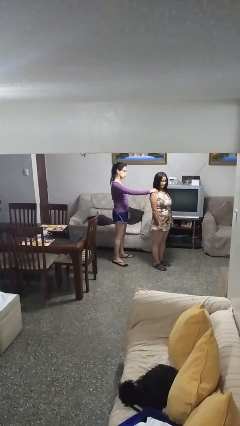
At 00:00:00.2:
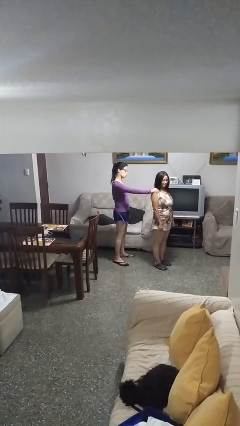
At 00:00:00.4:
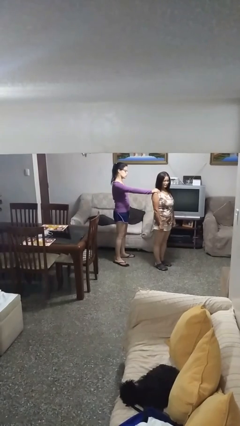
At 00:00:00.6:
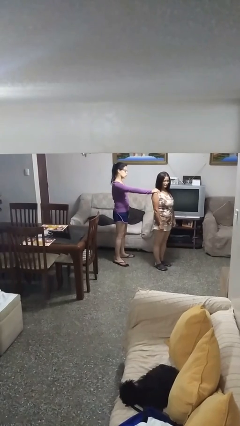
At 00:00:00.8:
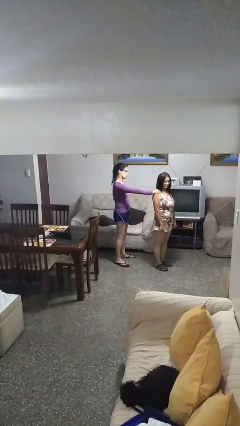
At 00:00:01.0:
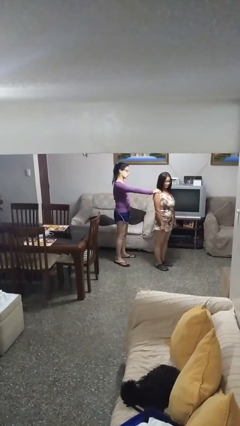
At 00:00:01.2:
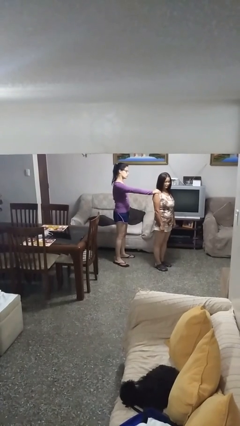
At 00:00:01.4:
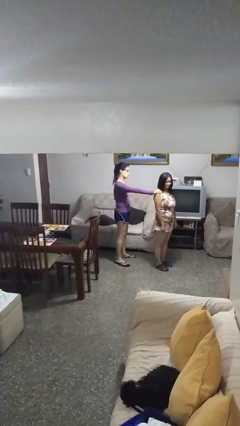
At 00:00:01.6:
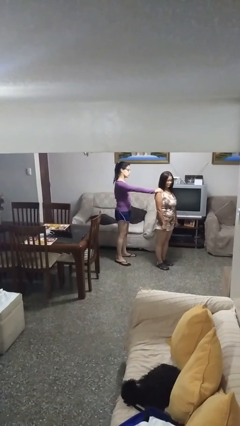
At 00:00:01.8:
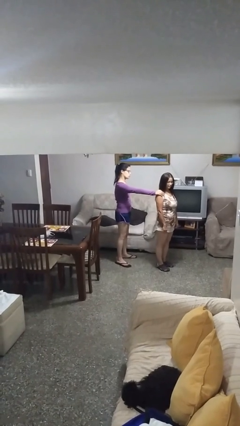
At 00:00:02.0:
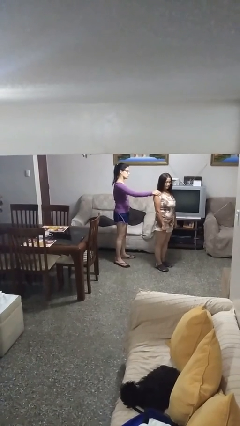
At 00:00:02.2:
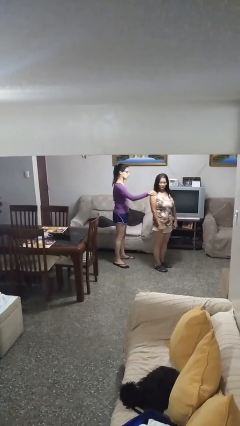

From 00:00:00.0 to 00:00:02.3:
person grabs person by shoulder

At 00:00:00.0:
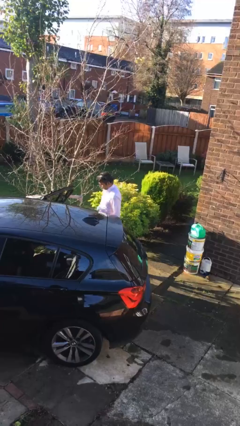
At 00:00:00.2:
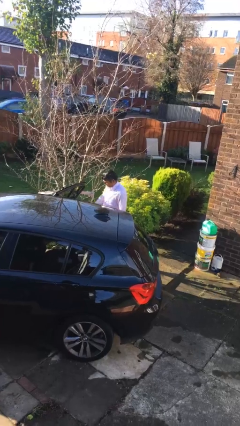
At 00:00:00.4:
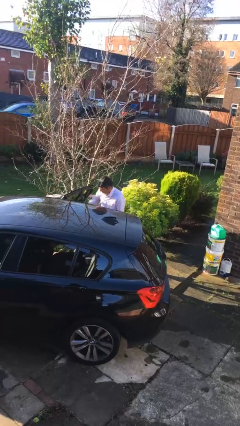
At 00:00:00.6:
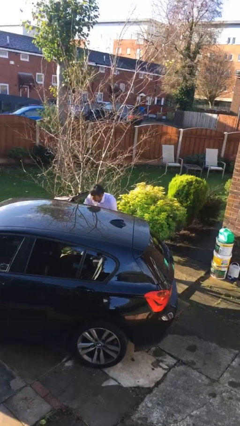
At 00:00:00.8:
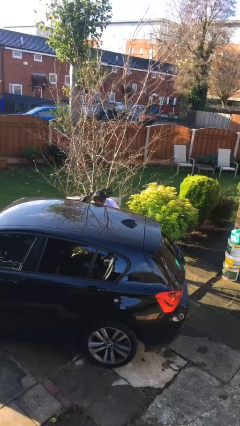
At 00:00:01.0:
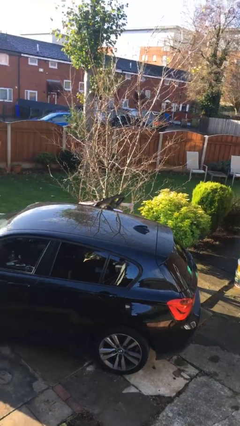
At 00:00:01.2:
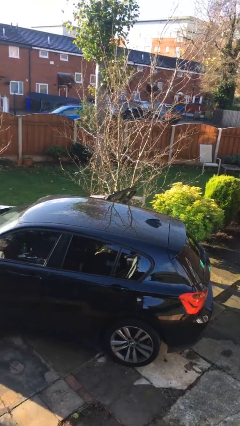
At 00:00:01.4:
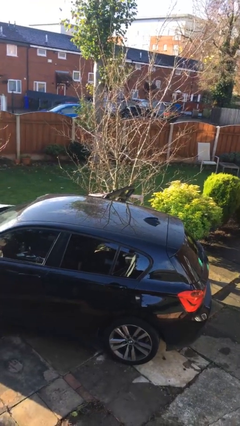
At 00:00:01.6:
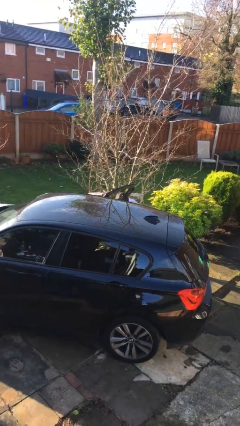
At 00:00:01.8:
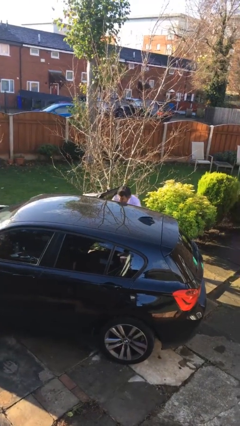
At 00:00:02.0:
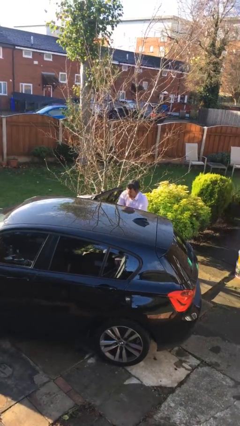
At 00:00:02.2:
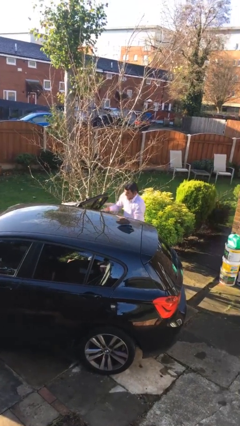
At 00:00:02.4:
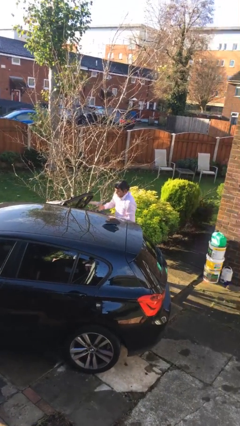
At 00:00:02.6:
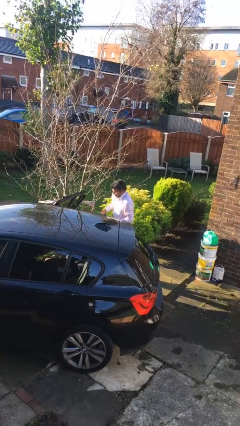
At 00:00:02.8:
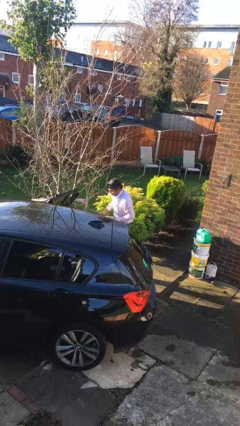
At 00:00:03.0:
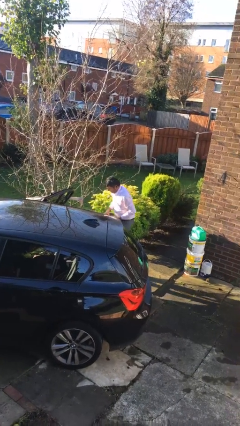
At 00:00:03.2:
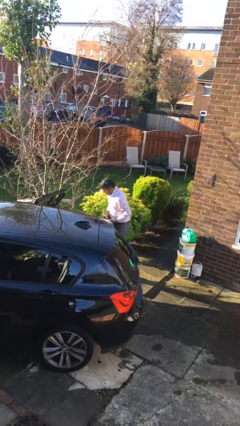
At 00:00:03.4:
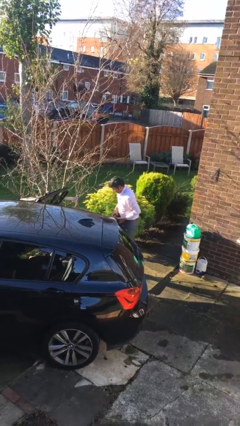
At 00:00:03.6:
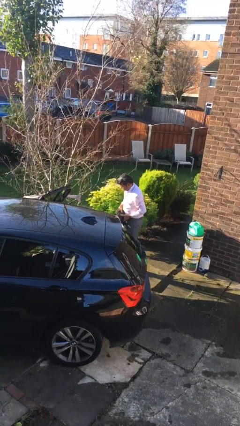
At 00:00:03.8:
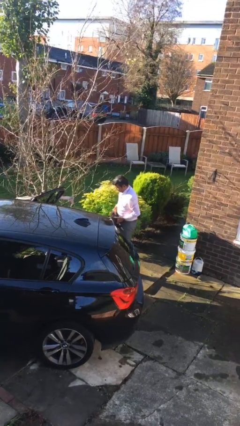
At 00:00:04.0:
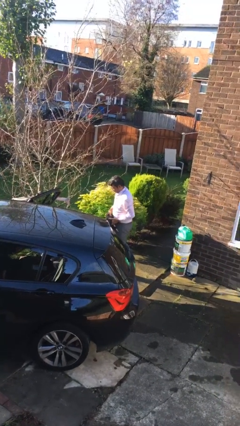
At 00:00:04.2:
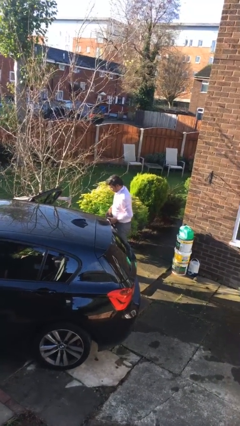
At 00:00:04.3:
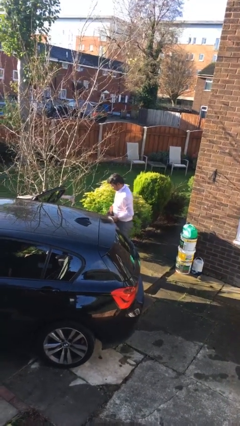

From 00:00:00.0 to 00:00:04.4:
person unloads car

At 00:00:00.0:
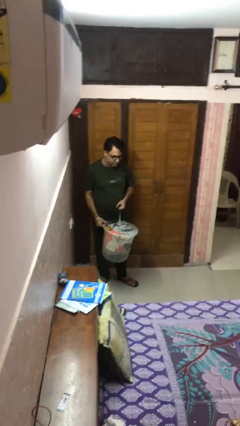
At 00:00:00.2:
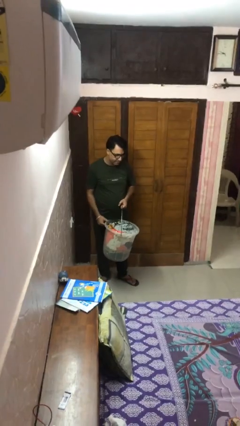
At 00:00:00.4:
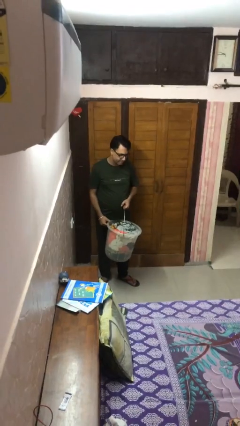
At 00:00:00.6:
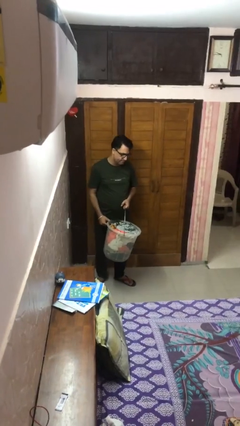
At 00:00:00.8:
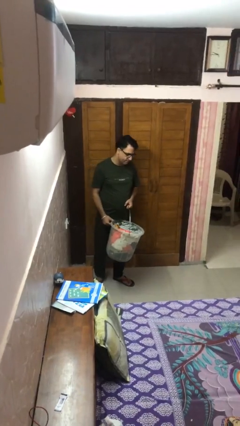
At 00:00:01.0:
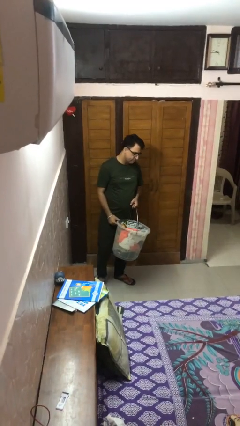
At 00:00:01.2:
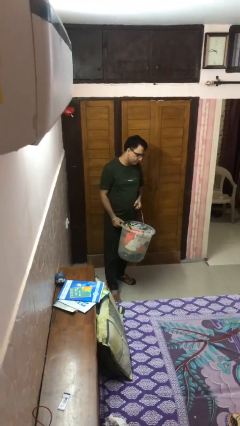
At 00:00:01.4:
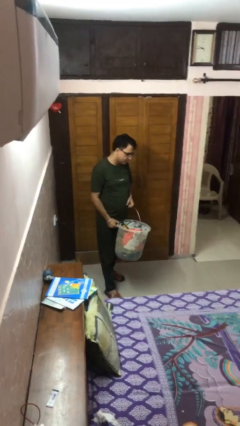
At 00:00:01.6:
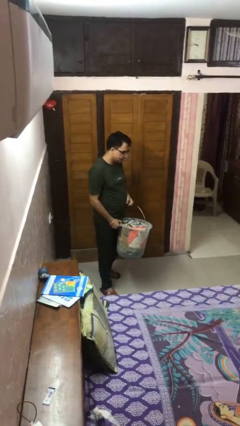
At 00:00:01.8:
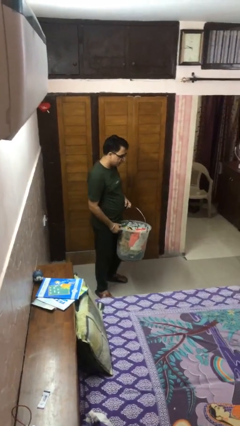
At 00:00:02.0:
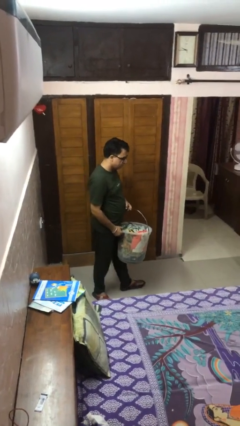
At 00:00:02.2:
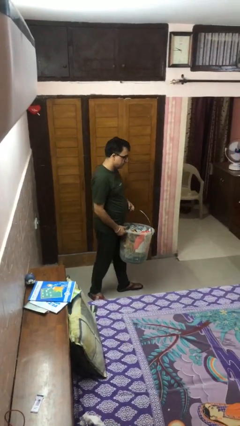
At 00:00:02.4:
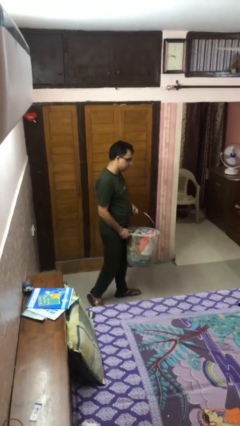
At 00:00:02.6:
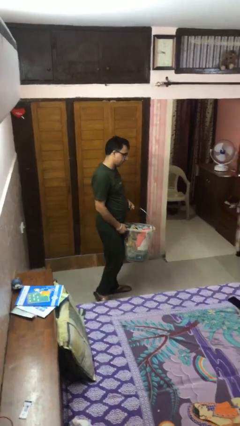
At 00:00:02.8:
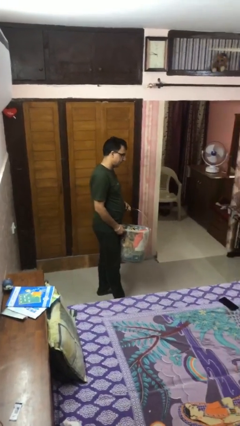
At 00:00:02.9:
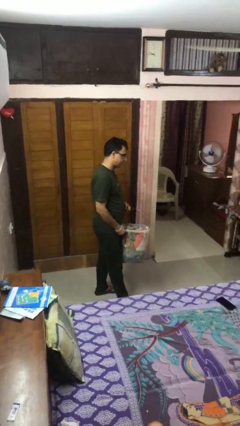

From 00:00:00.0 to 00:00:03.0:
person carries laundry basket

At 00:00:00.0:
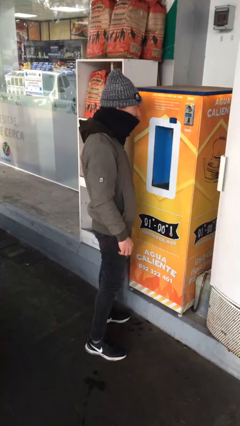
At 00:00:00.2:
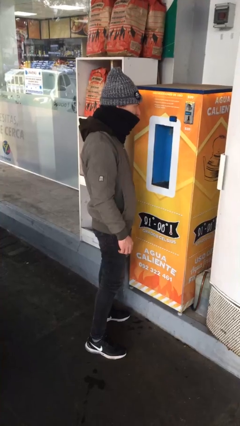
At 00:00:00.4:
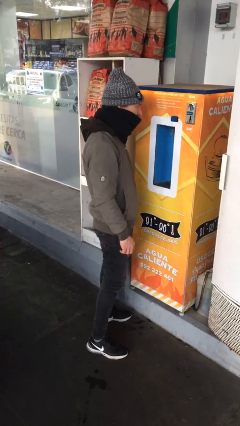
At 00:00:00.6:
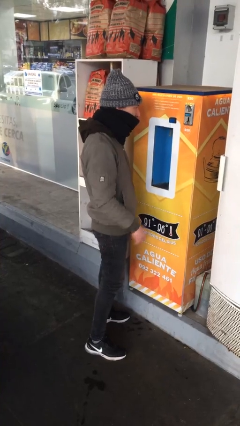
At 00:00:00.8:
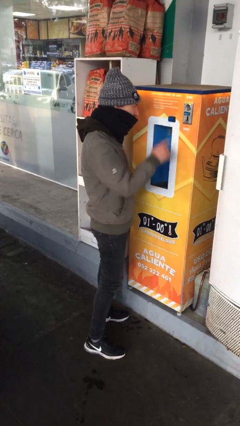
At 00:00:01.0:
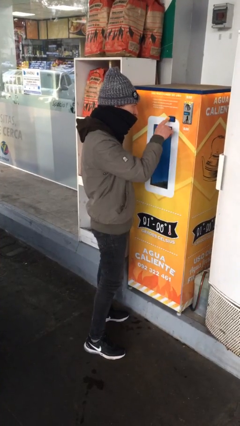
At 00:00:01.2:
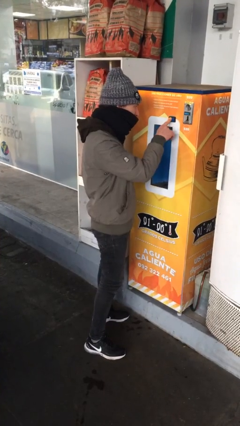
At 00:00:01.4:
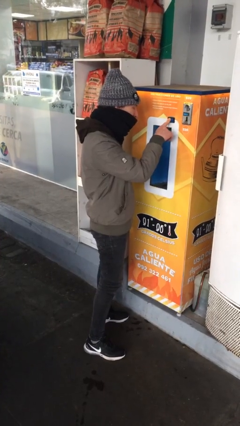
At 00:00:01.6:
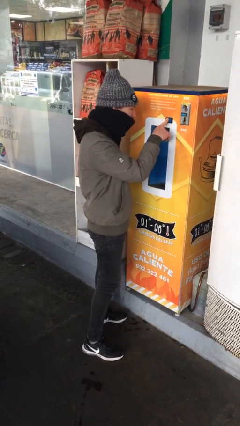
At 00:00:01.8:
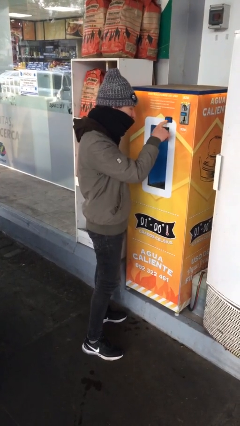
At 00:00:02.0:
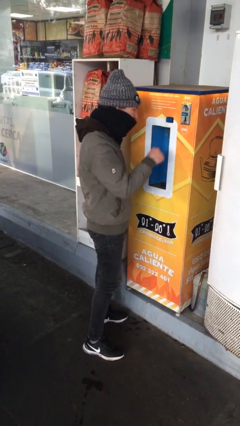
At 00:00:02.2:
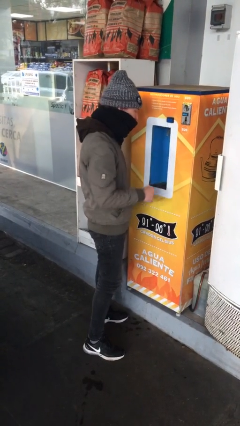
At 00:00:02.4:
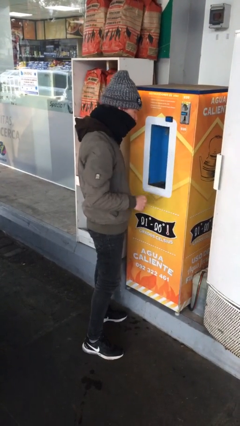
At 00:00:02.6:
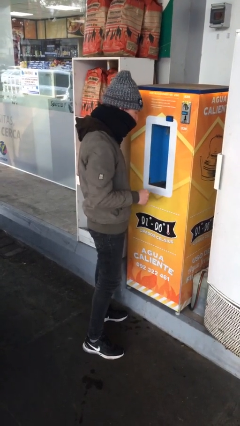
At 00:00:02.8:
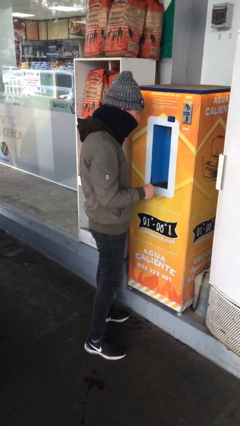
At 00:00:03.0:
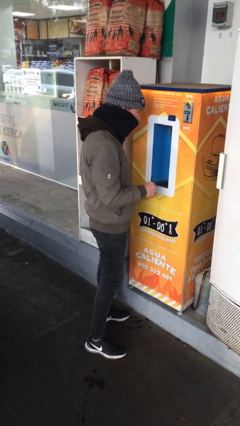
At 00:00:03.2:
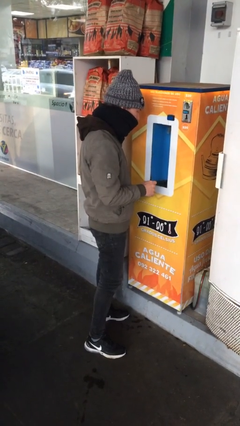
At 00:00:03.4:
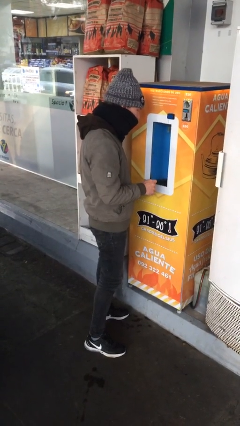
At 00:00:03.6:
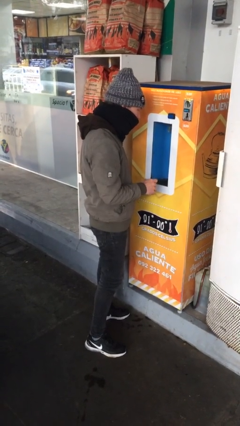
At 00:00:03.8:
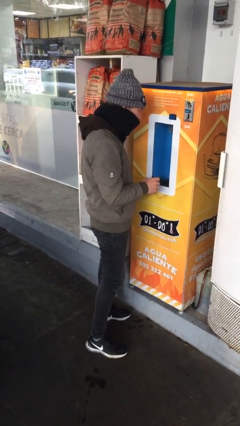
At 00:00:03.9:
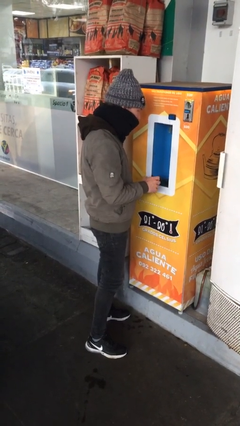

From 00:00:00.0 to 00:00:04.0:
person purchases from machine

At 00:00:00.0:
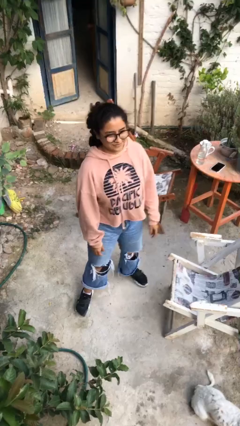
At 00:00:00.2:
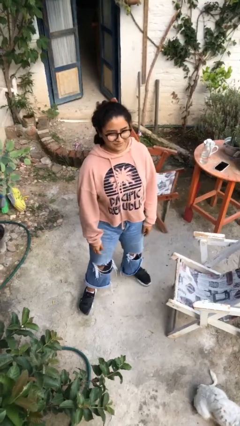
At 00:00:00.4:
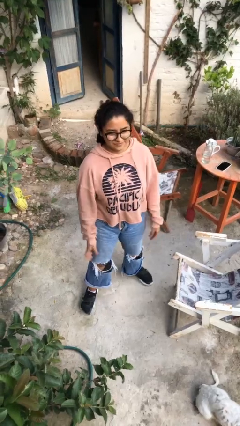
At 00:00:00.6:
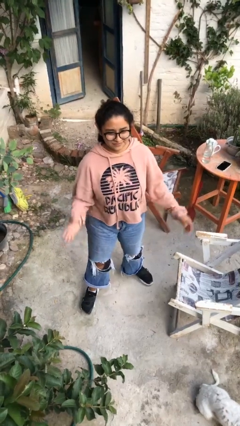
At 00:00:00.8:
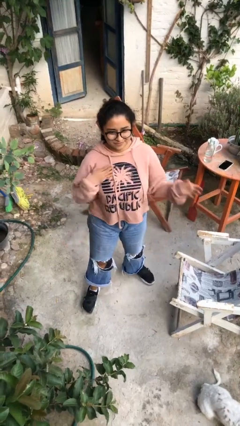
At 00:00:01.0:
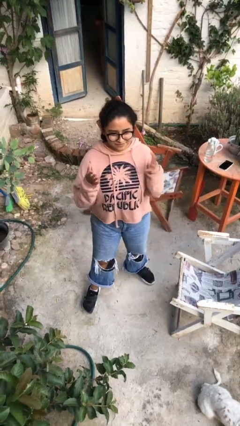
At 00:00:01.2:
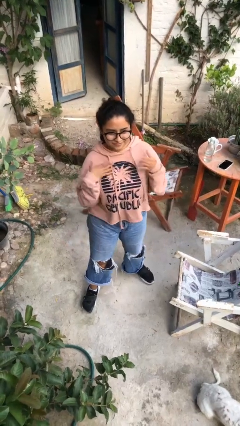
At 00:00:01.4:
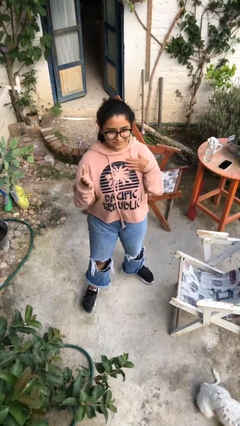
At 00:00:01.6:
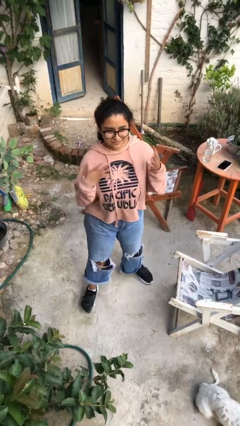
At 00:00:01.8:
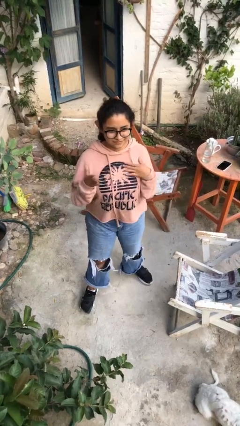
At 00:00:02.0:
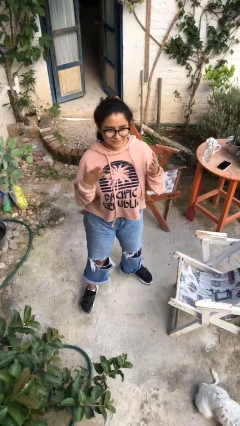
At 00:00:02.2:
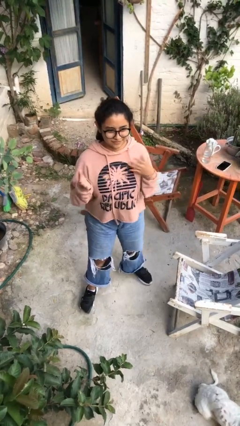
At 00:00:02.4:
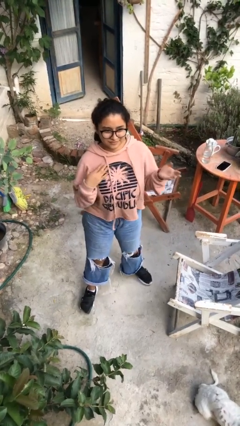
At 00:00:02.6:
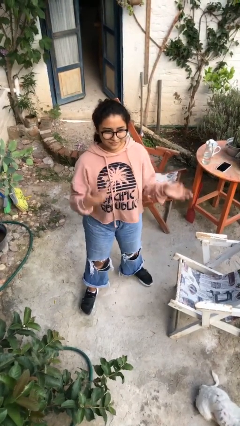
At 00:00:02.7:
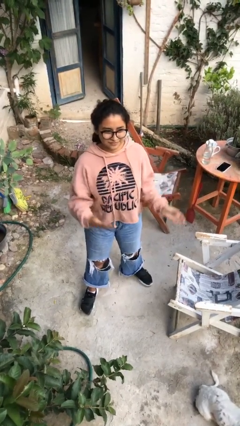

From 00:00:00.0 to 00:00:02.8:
person drums on chest

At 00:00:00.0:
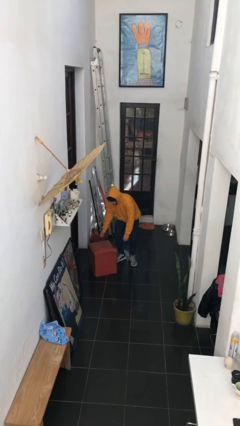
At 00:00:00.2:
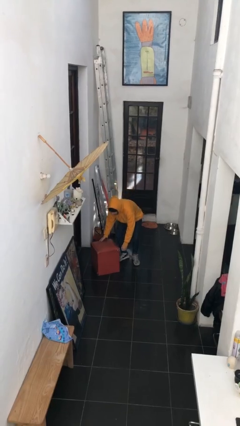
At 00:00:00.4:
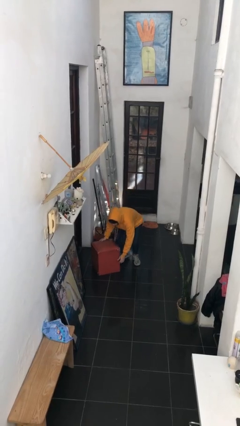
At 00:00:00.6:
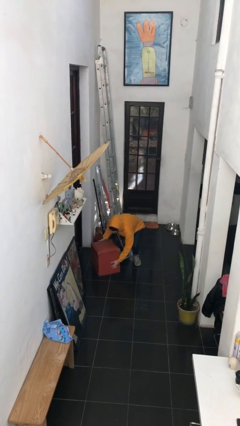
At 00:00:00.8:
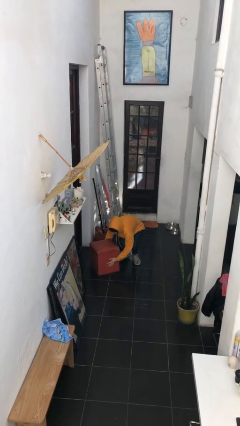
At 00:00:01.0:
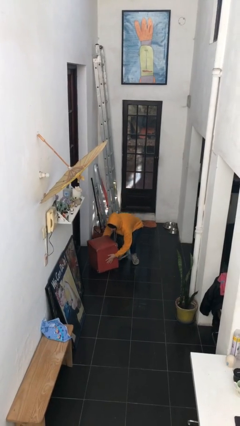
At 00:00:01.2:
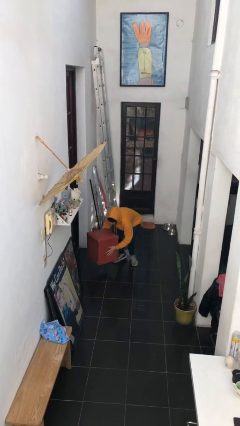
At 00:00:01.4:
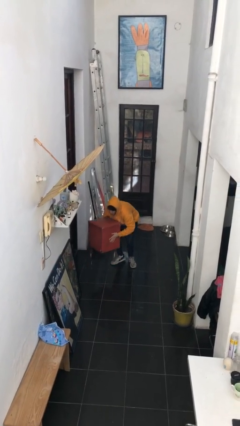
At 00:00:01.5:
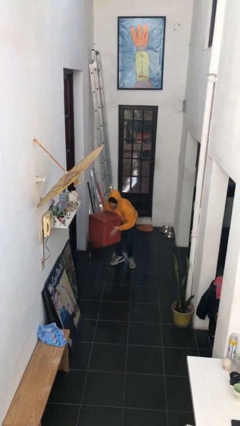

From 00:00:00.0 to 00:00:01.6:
person picks up object from floor
